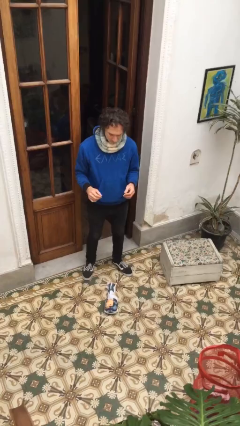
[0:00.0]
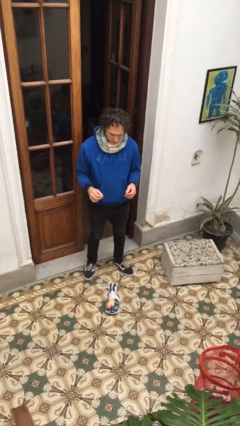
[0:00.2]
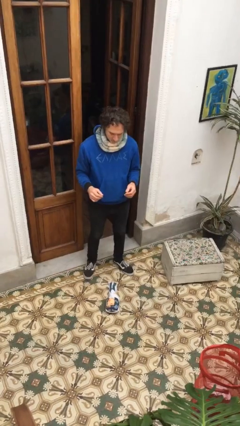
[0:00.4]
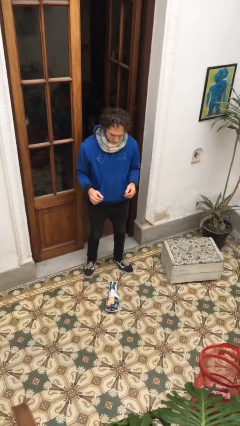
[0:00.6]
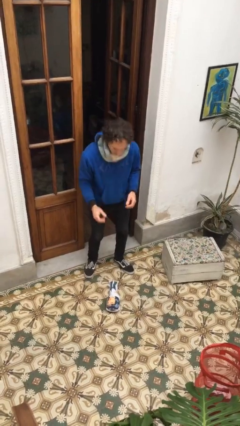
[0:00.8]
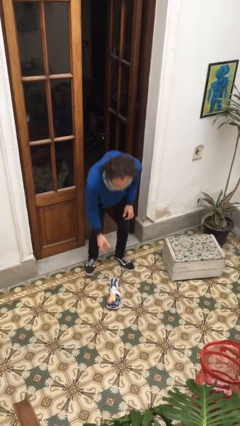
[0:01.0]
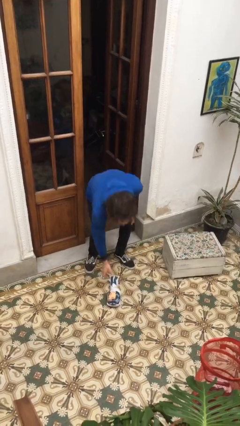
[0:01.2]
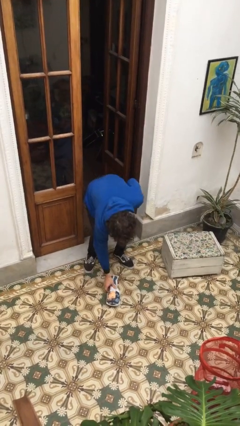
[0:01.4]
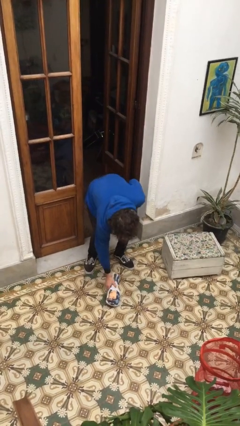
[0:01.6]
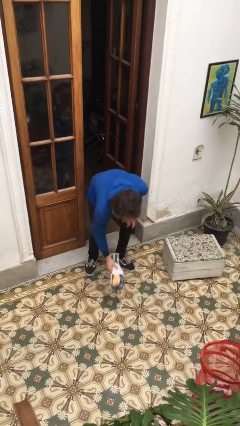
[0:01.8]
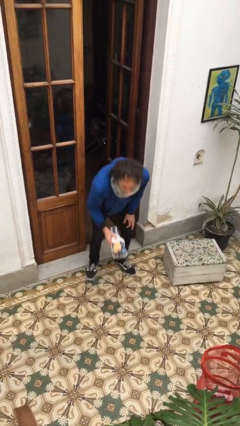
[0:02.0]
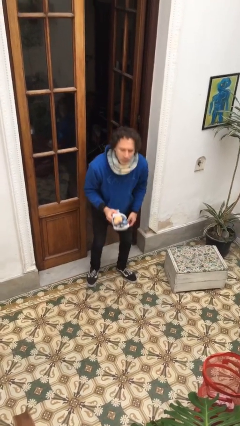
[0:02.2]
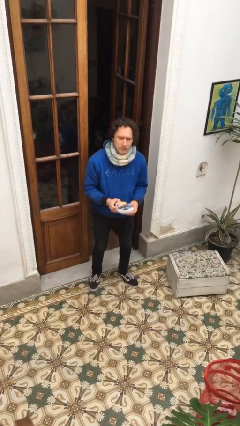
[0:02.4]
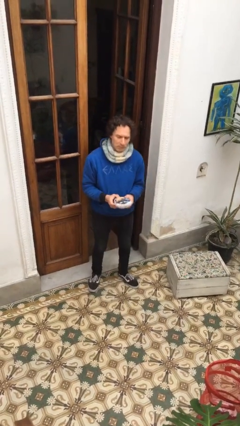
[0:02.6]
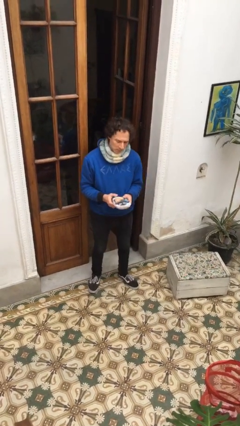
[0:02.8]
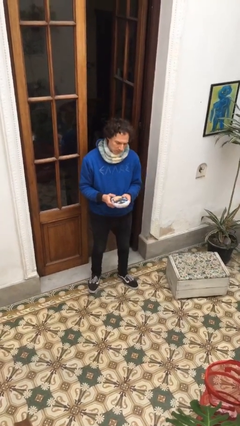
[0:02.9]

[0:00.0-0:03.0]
person picks up object from floor

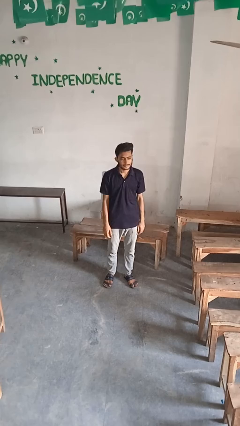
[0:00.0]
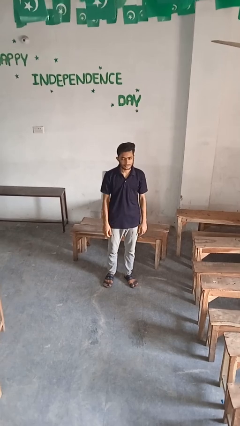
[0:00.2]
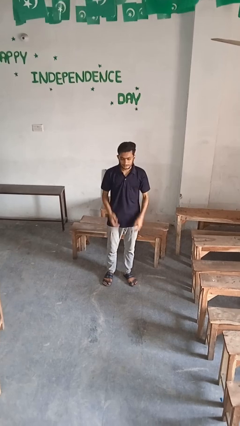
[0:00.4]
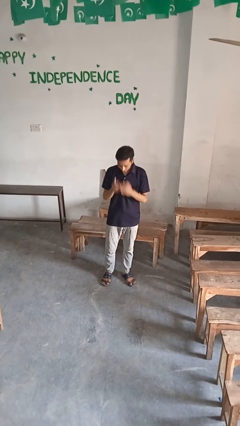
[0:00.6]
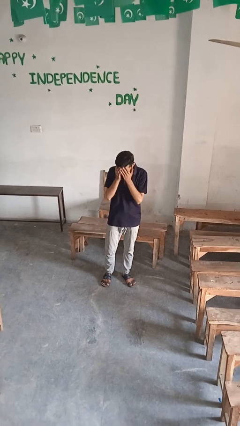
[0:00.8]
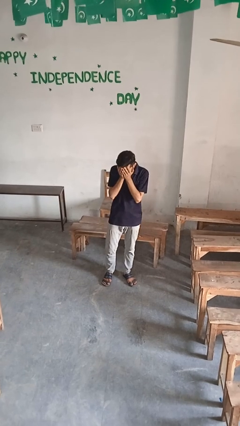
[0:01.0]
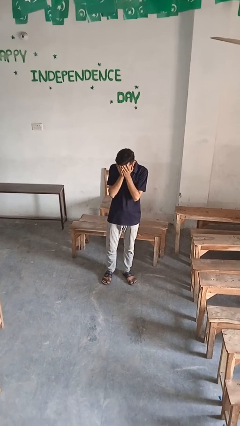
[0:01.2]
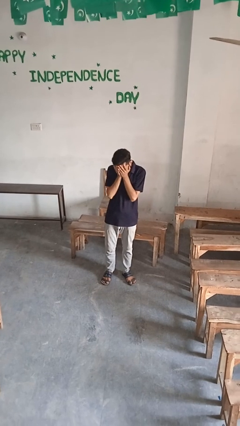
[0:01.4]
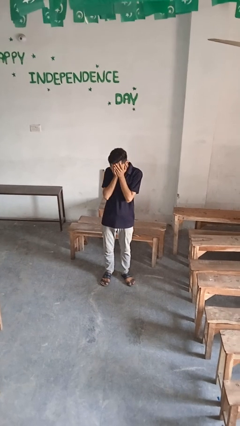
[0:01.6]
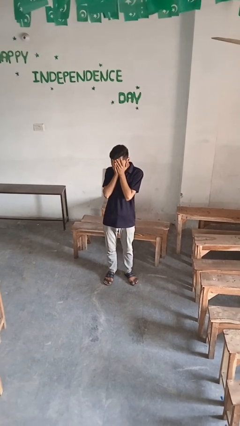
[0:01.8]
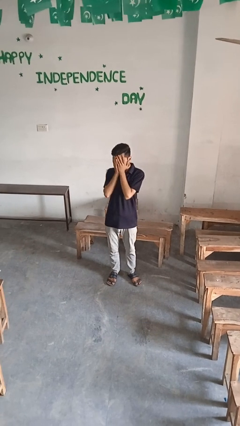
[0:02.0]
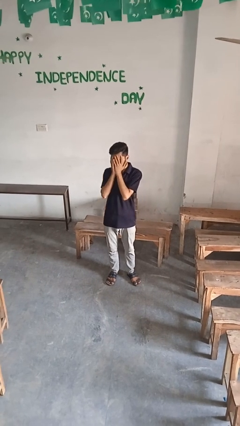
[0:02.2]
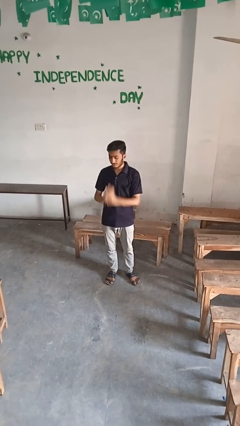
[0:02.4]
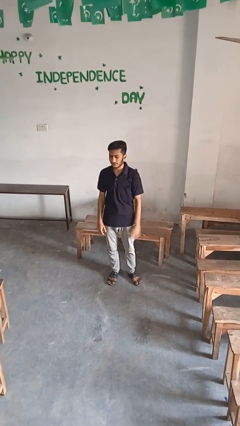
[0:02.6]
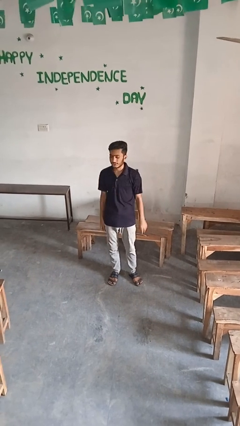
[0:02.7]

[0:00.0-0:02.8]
person covers face with hands

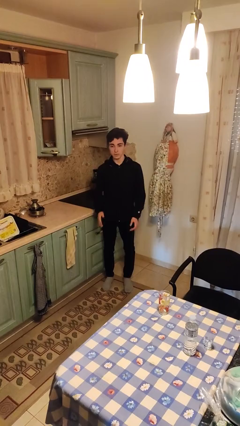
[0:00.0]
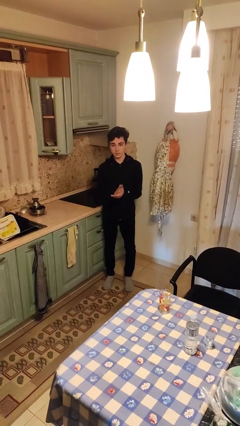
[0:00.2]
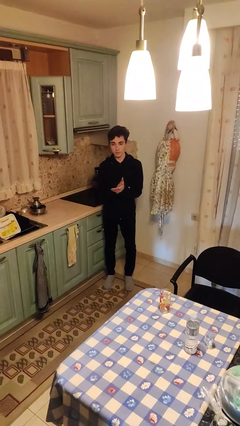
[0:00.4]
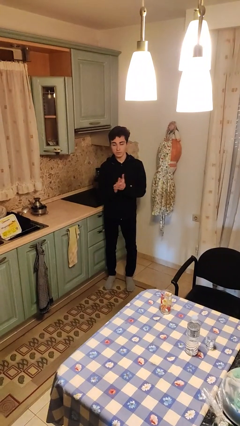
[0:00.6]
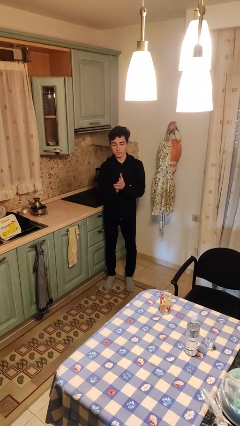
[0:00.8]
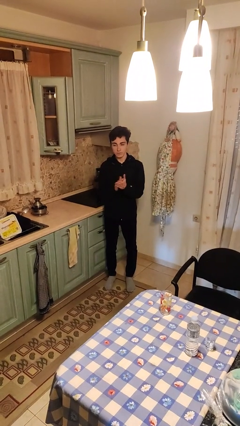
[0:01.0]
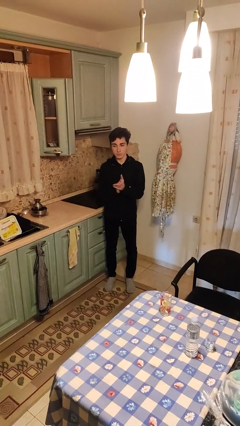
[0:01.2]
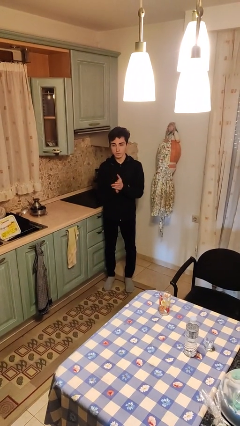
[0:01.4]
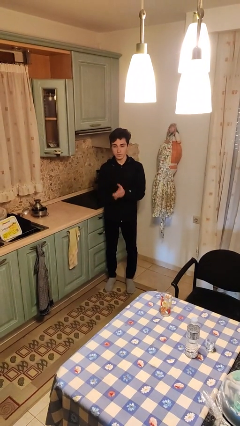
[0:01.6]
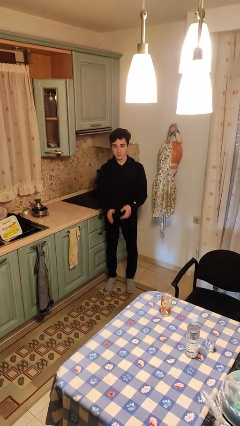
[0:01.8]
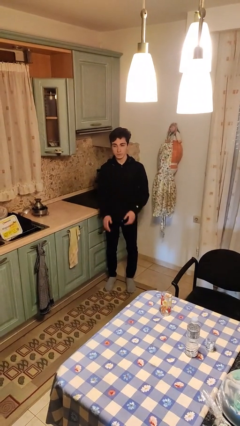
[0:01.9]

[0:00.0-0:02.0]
person claps hands

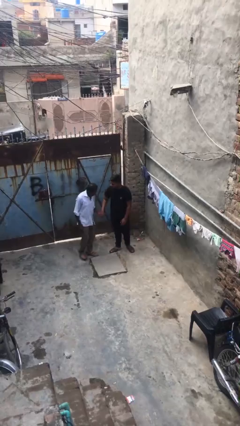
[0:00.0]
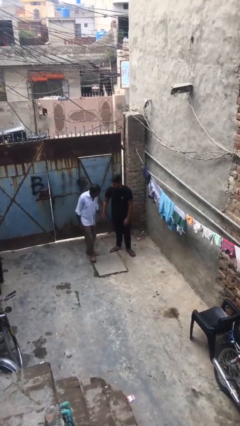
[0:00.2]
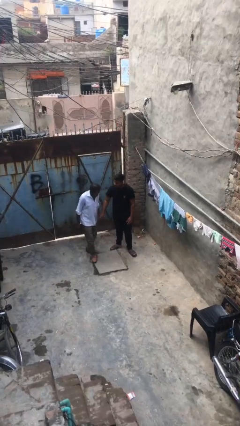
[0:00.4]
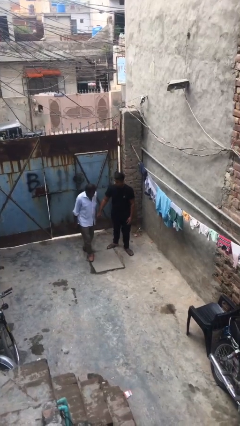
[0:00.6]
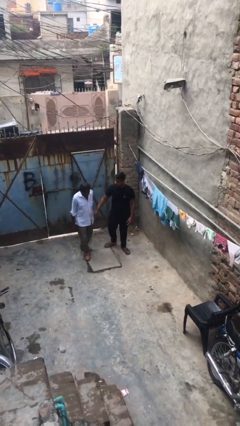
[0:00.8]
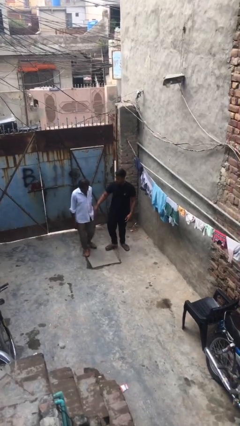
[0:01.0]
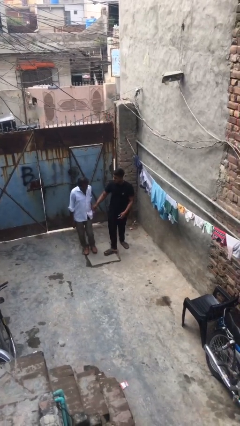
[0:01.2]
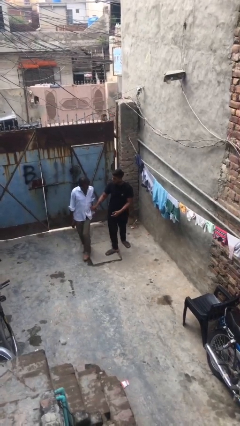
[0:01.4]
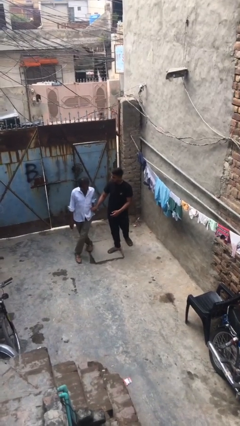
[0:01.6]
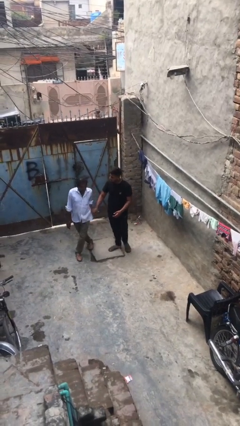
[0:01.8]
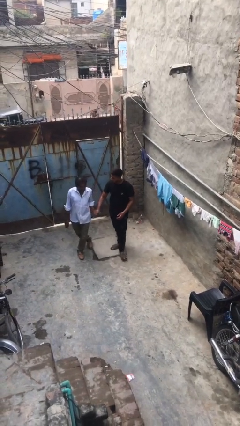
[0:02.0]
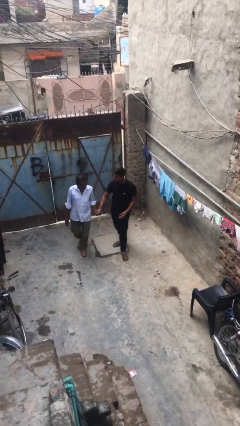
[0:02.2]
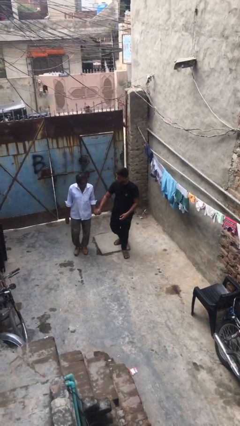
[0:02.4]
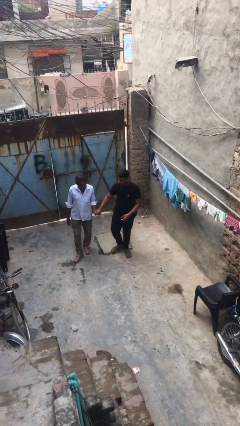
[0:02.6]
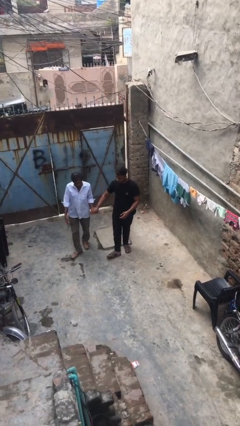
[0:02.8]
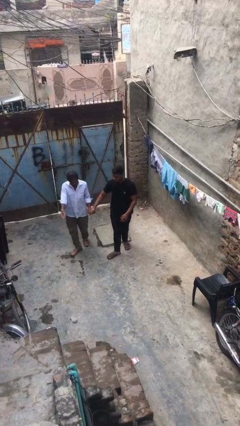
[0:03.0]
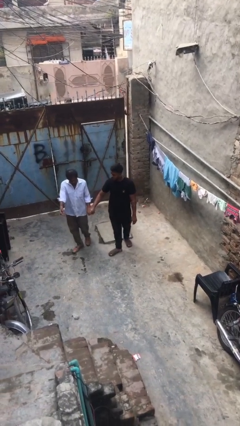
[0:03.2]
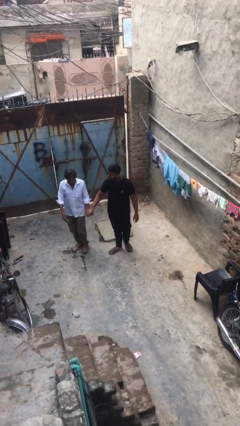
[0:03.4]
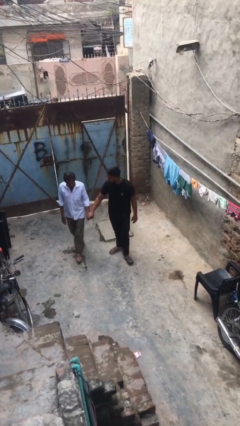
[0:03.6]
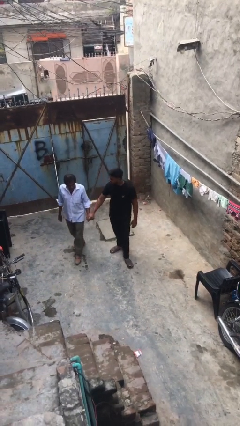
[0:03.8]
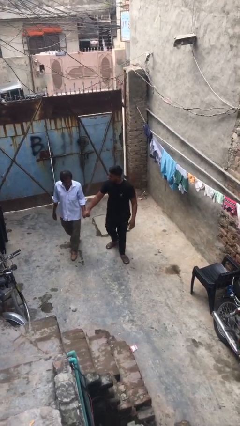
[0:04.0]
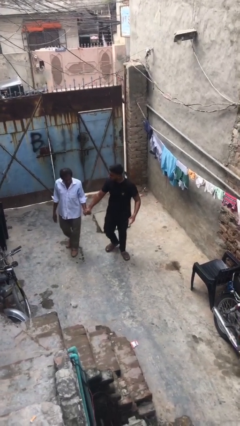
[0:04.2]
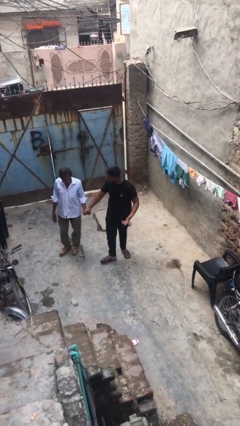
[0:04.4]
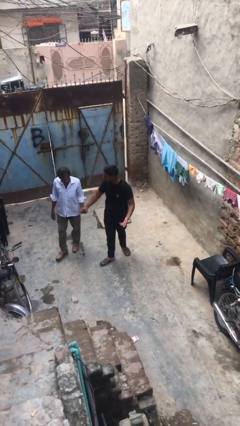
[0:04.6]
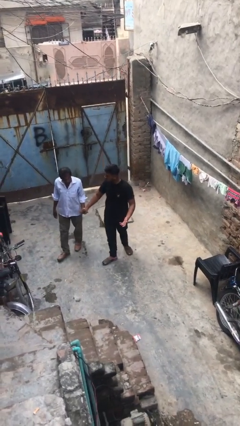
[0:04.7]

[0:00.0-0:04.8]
person holds hand

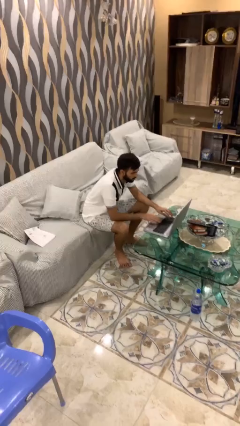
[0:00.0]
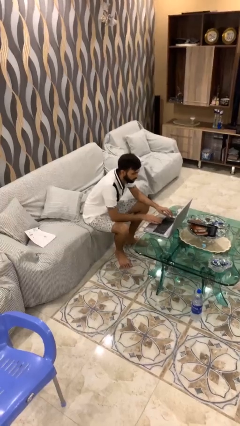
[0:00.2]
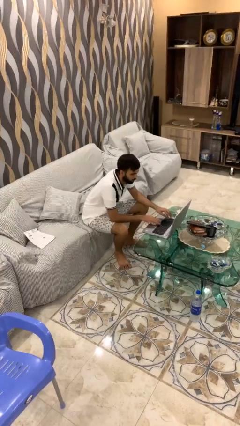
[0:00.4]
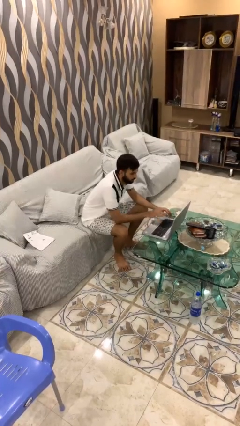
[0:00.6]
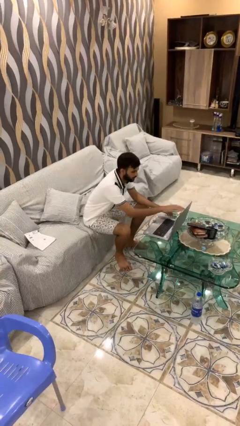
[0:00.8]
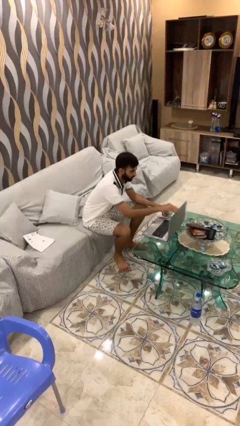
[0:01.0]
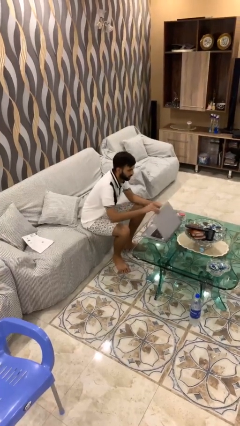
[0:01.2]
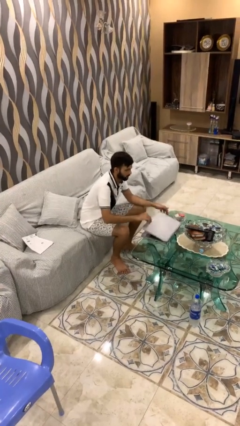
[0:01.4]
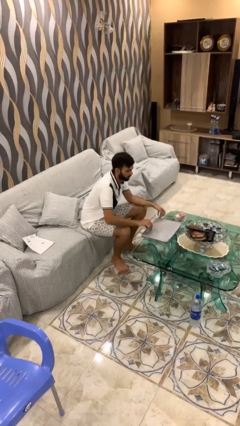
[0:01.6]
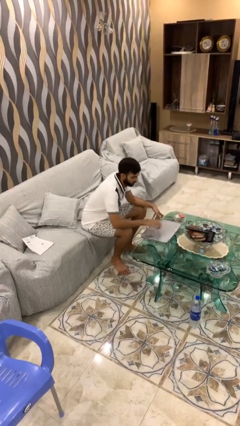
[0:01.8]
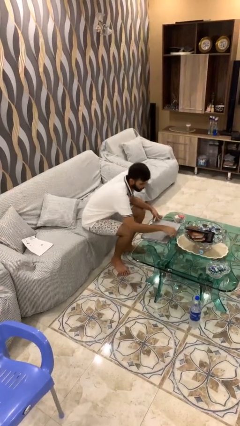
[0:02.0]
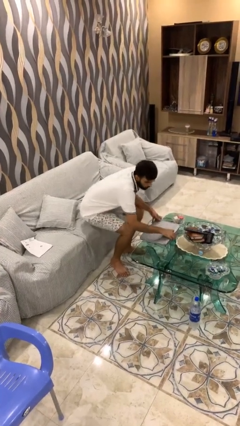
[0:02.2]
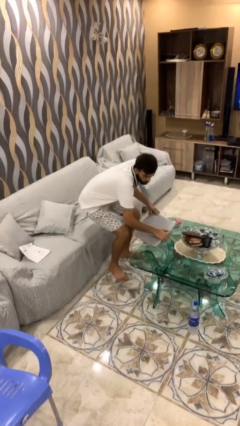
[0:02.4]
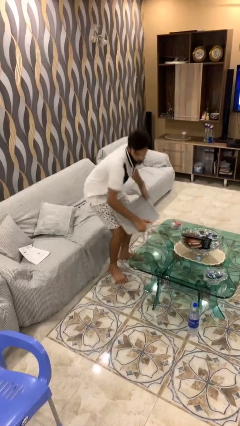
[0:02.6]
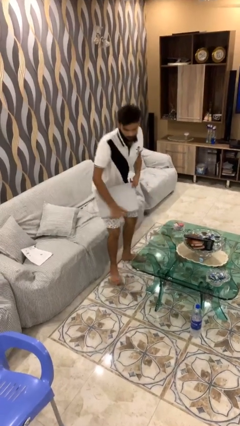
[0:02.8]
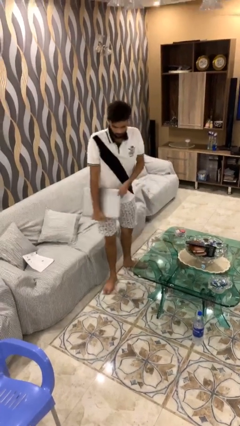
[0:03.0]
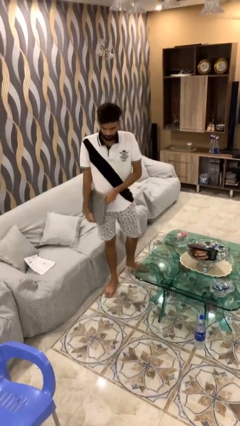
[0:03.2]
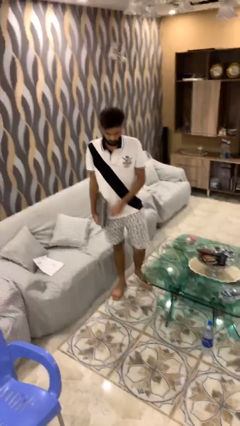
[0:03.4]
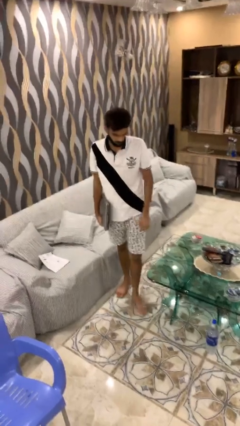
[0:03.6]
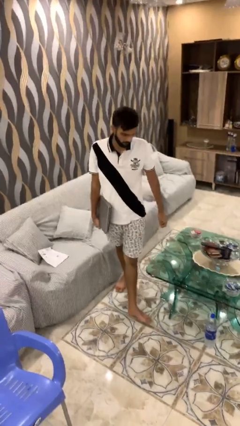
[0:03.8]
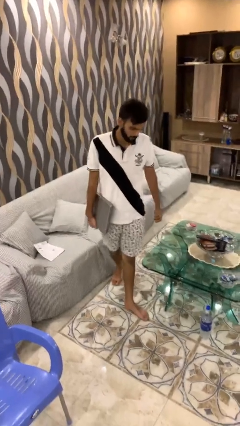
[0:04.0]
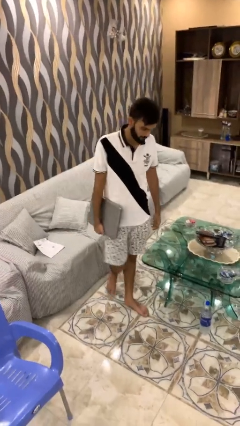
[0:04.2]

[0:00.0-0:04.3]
person stands up

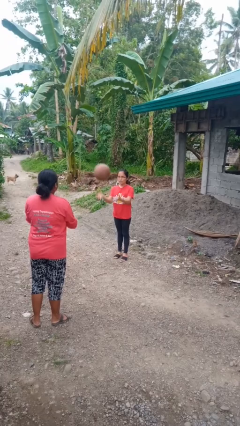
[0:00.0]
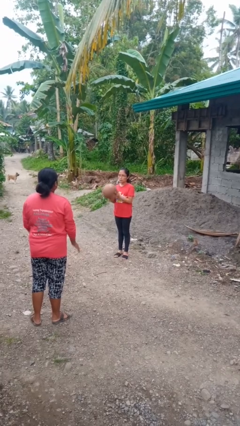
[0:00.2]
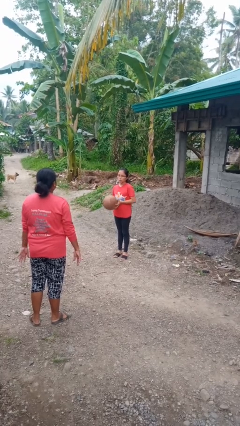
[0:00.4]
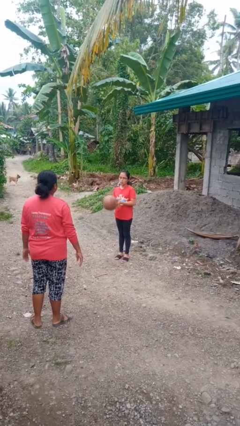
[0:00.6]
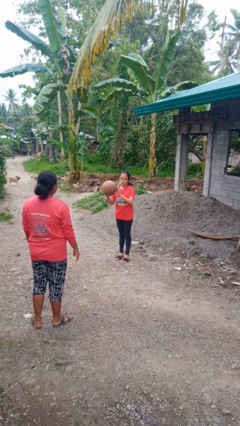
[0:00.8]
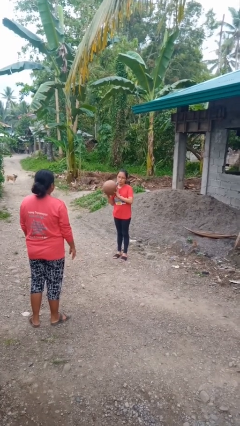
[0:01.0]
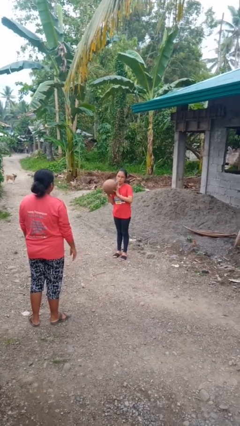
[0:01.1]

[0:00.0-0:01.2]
person catches object from person
